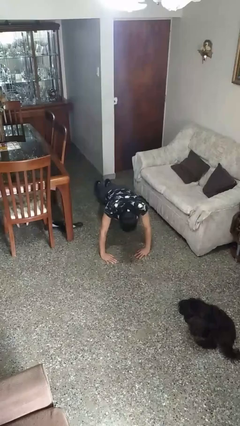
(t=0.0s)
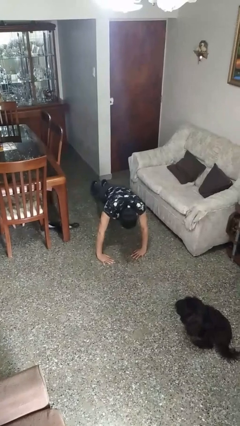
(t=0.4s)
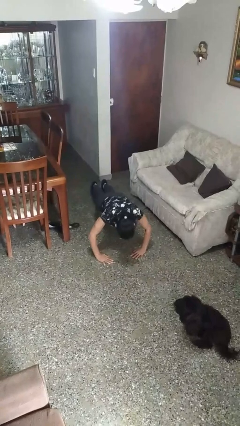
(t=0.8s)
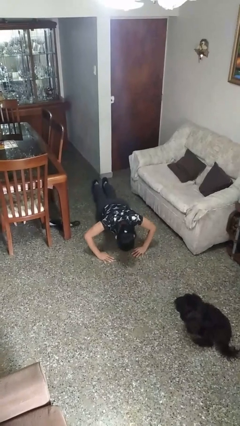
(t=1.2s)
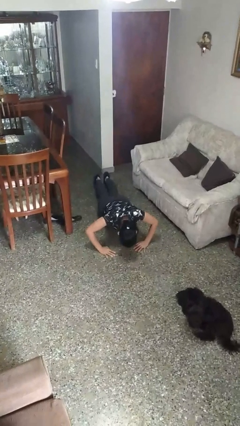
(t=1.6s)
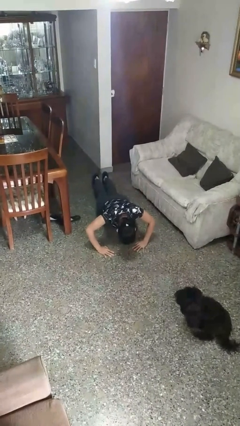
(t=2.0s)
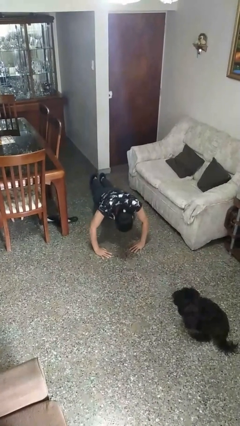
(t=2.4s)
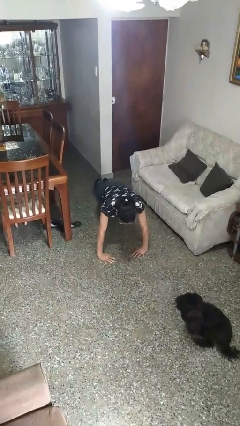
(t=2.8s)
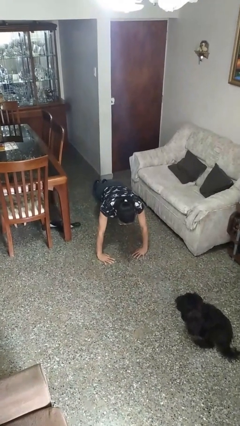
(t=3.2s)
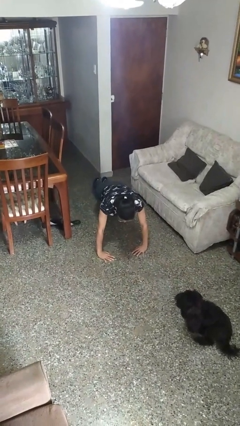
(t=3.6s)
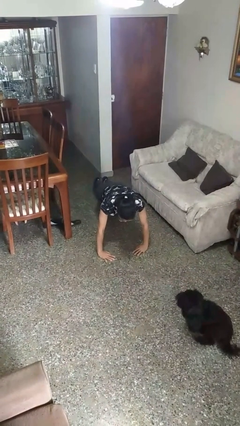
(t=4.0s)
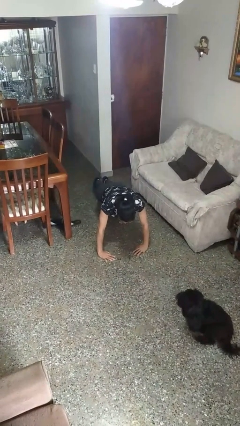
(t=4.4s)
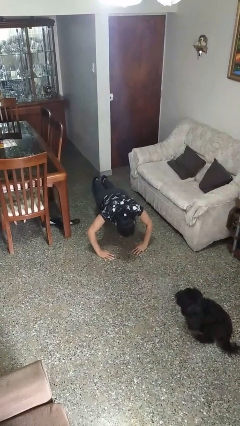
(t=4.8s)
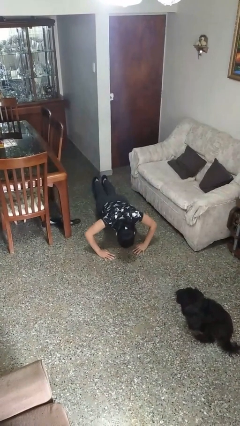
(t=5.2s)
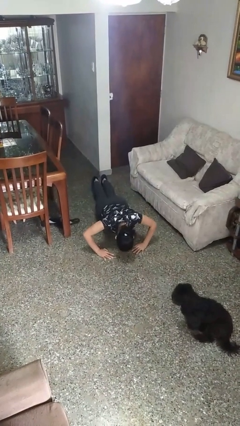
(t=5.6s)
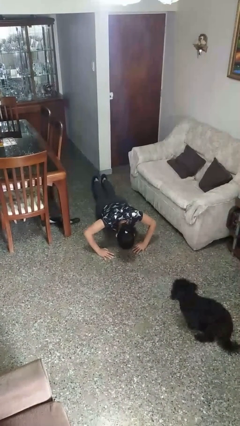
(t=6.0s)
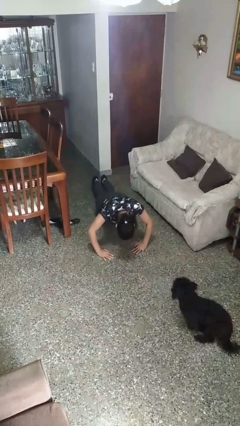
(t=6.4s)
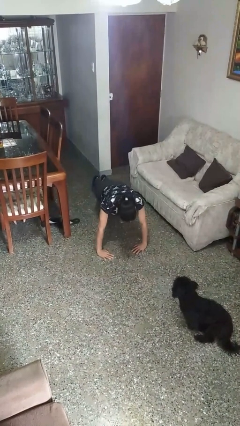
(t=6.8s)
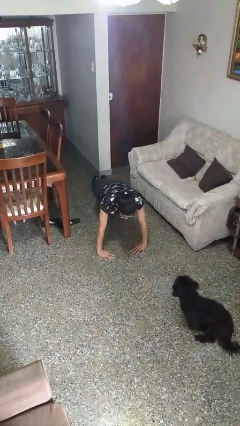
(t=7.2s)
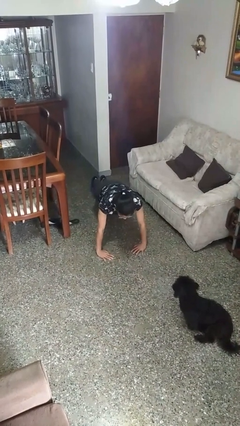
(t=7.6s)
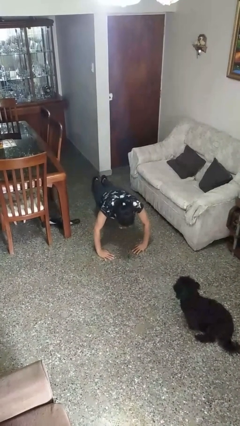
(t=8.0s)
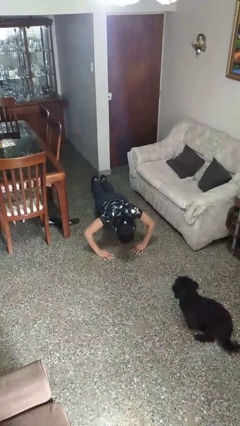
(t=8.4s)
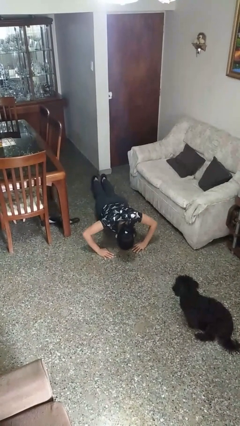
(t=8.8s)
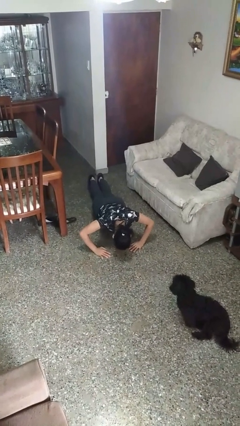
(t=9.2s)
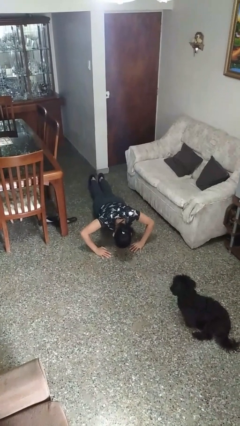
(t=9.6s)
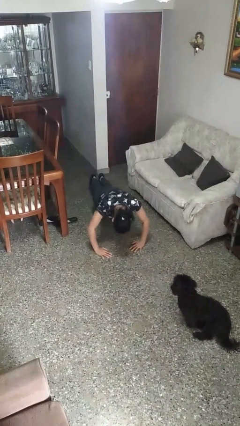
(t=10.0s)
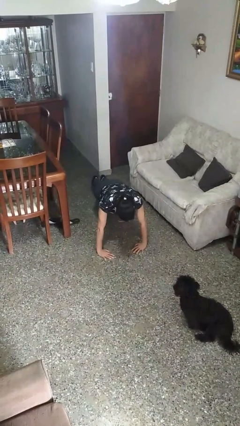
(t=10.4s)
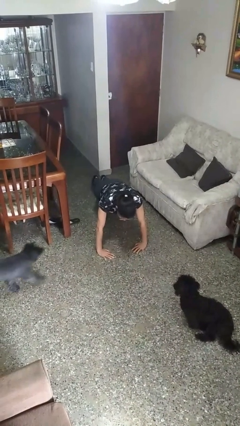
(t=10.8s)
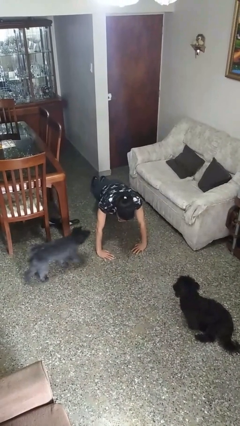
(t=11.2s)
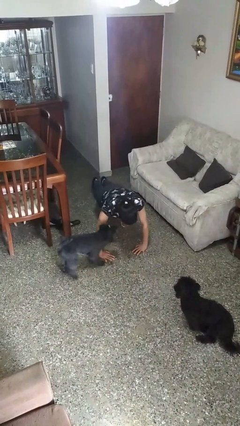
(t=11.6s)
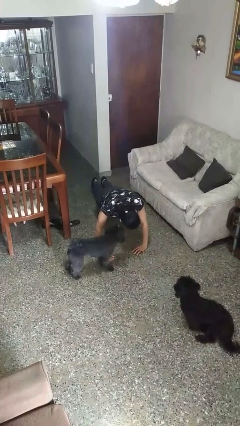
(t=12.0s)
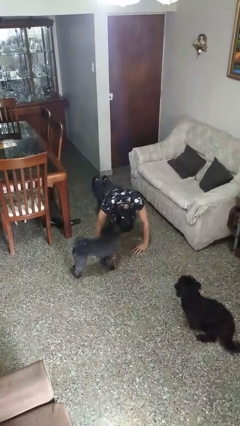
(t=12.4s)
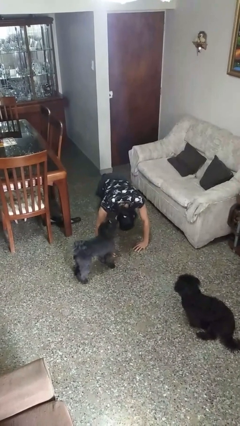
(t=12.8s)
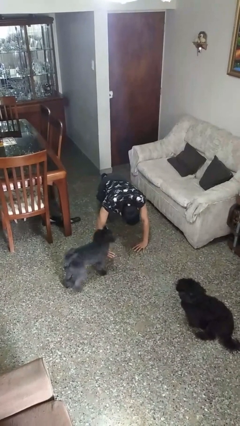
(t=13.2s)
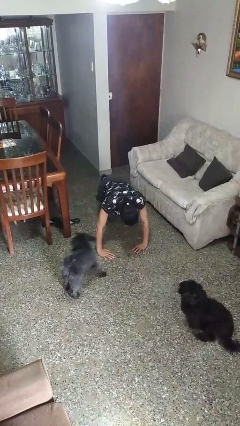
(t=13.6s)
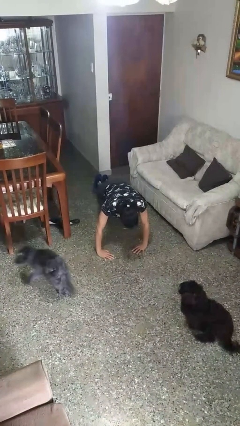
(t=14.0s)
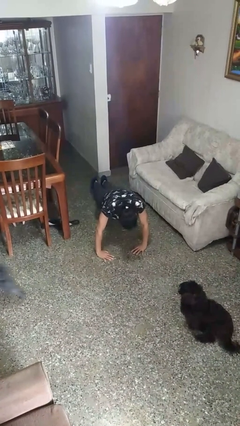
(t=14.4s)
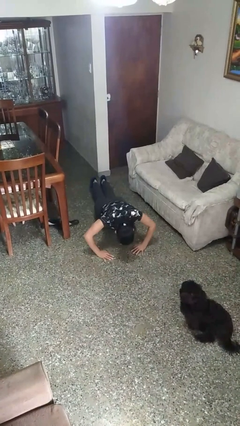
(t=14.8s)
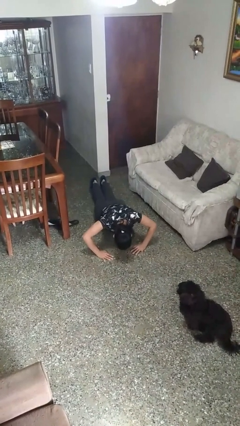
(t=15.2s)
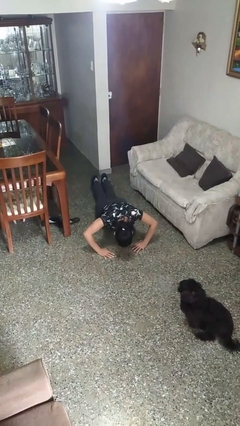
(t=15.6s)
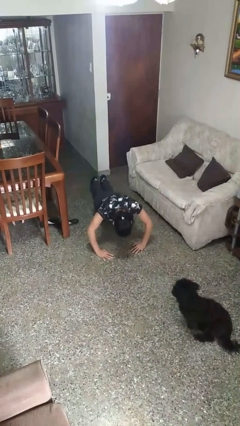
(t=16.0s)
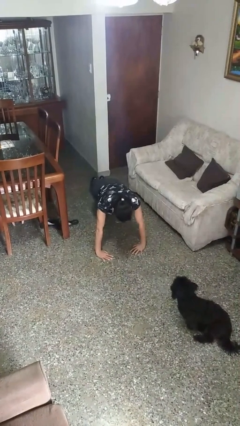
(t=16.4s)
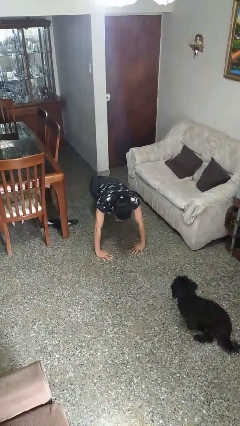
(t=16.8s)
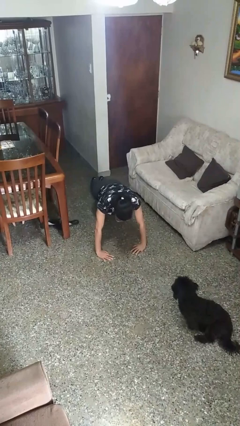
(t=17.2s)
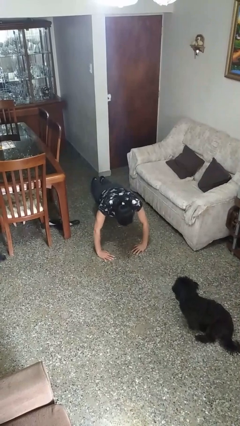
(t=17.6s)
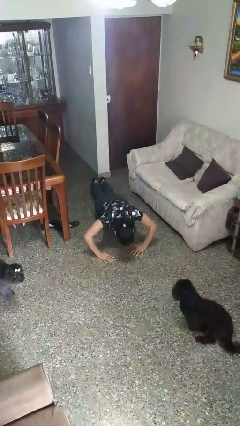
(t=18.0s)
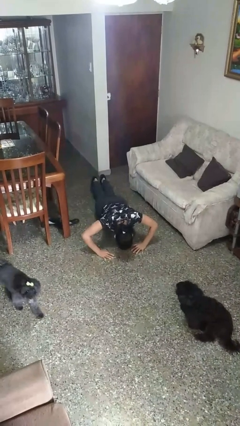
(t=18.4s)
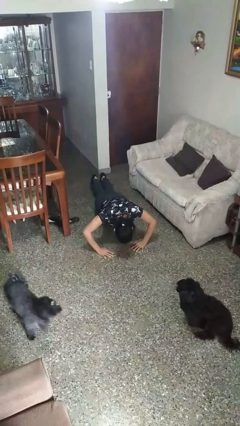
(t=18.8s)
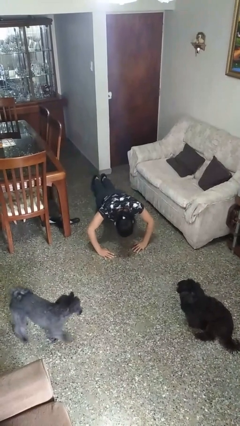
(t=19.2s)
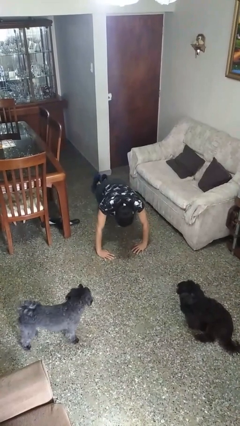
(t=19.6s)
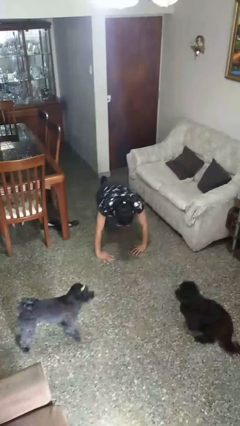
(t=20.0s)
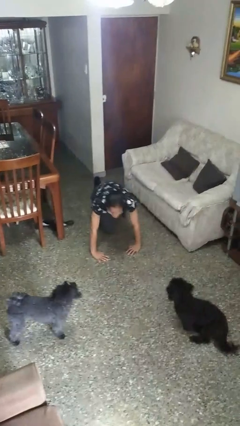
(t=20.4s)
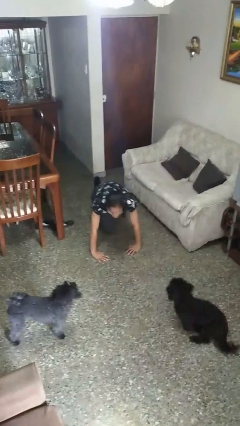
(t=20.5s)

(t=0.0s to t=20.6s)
person exercises with pushup

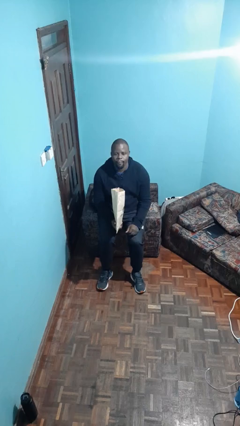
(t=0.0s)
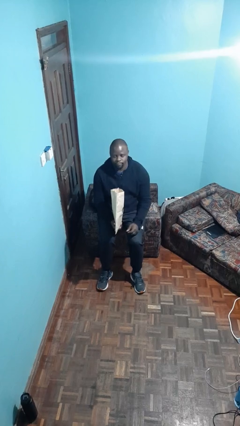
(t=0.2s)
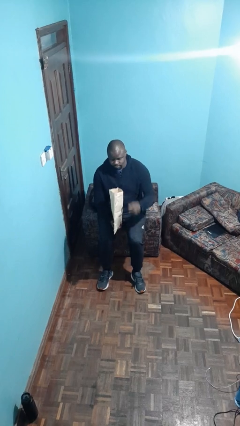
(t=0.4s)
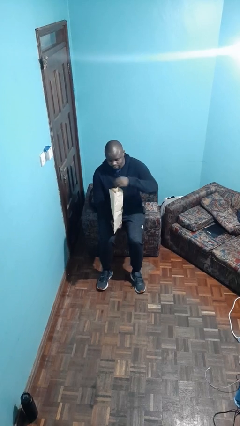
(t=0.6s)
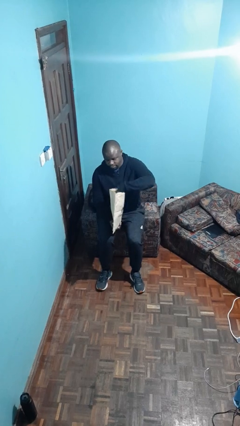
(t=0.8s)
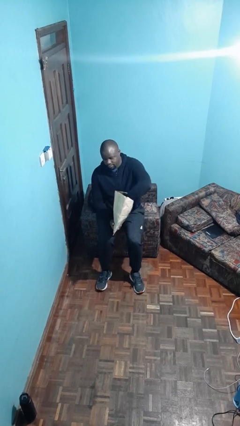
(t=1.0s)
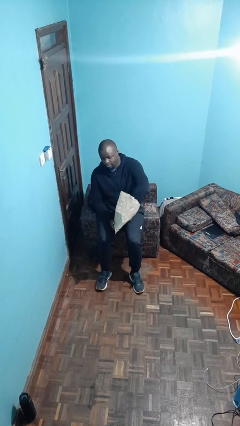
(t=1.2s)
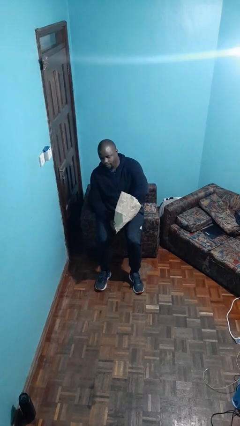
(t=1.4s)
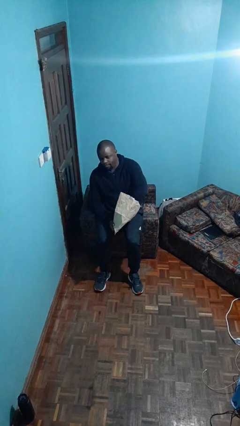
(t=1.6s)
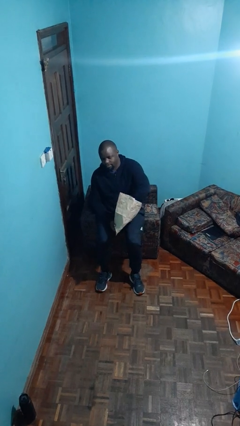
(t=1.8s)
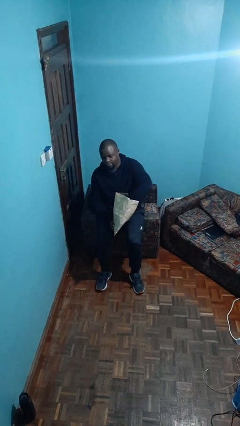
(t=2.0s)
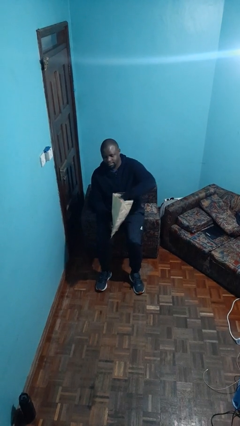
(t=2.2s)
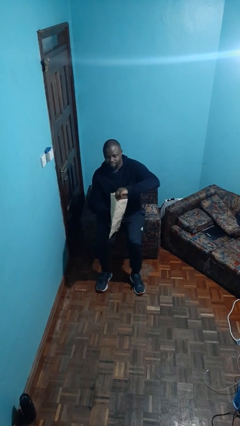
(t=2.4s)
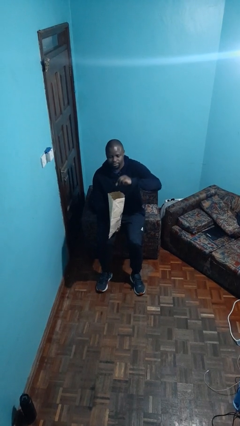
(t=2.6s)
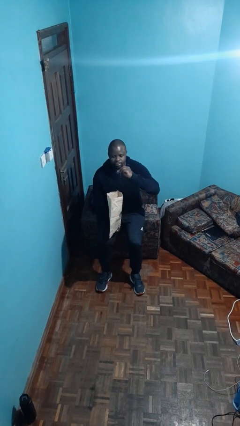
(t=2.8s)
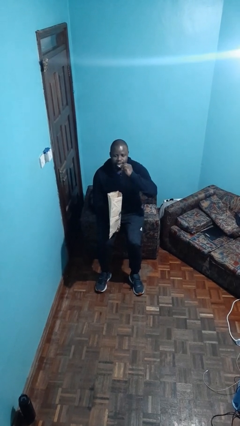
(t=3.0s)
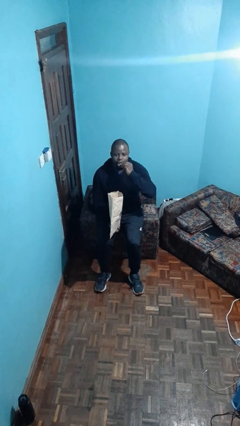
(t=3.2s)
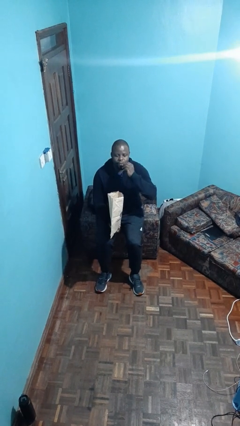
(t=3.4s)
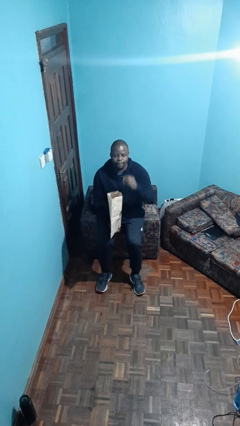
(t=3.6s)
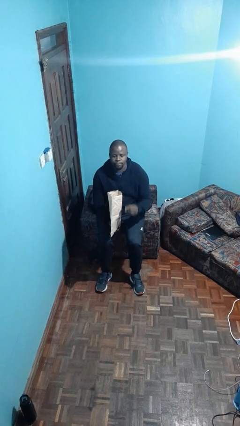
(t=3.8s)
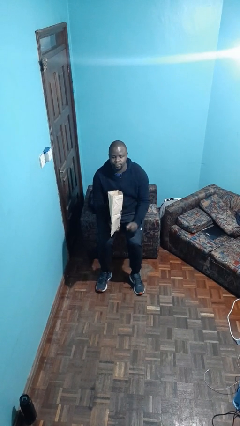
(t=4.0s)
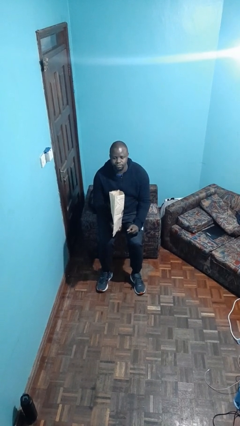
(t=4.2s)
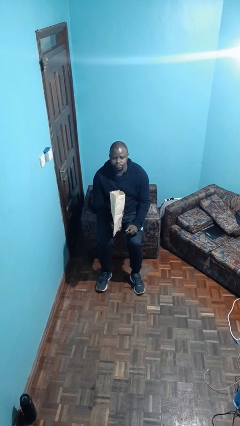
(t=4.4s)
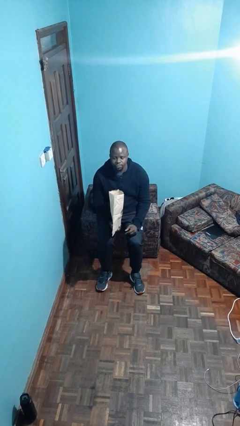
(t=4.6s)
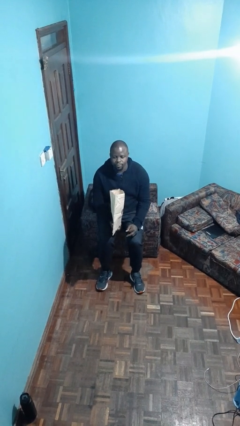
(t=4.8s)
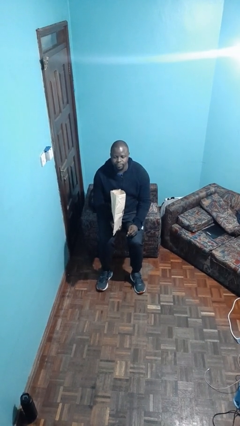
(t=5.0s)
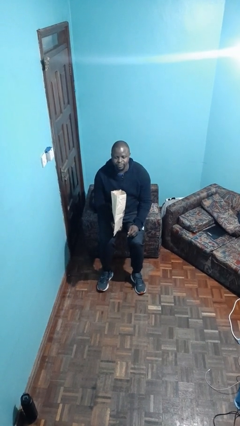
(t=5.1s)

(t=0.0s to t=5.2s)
person eats snack from bag

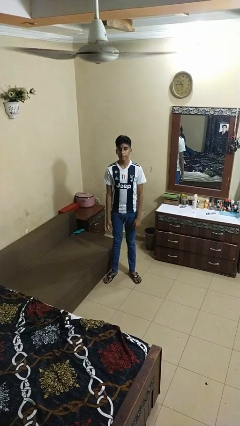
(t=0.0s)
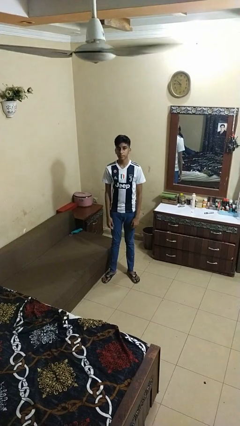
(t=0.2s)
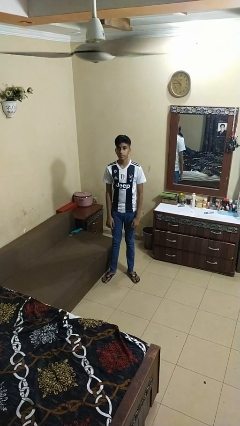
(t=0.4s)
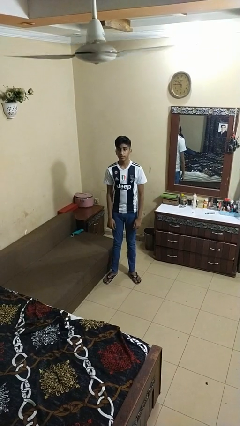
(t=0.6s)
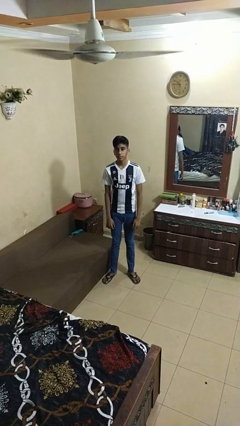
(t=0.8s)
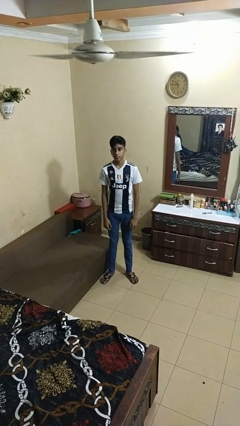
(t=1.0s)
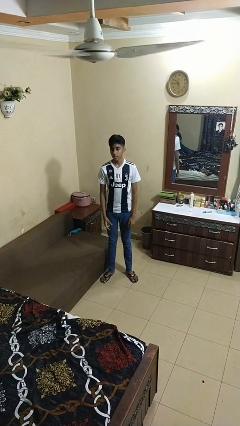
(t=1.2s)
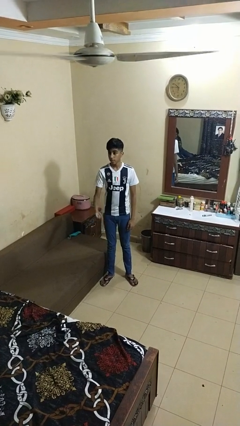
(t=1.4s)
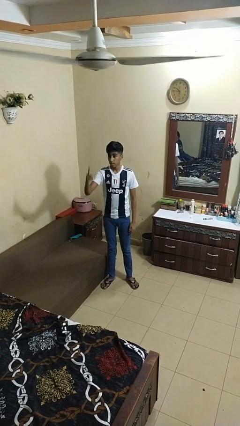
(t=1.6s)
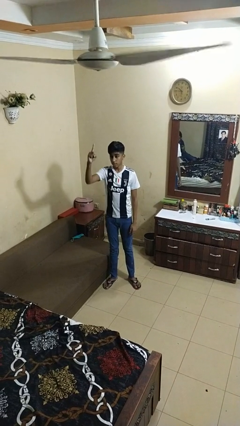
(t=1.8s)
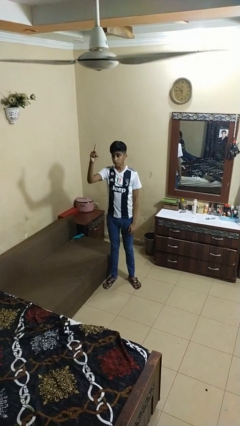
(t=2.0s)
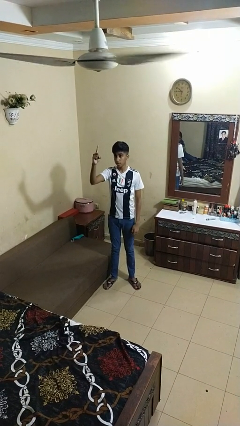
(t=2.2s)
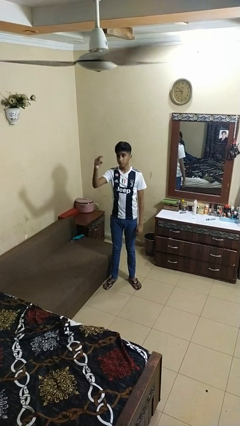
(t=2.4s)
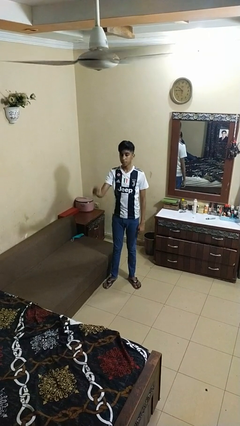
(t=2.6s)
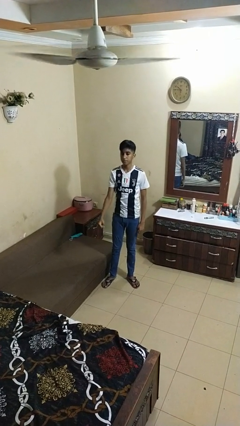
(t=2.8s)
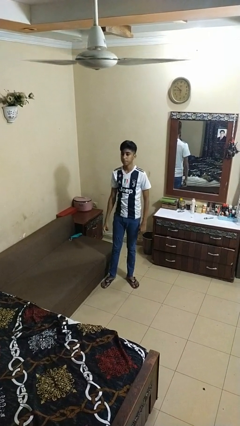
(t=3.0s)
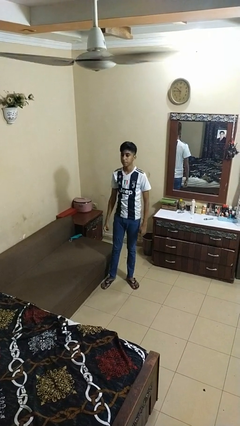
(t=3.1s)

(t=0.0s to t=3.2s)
person gestures number one
